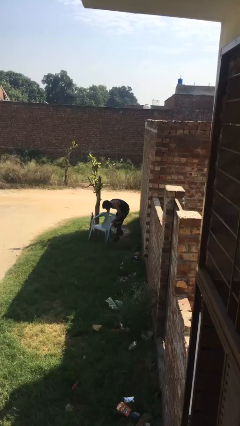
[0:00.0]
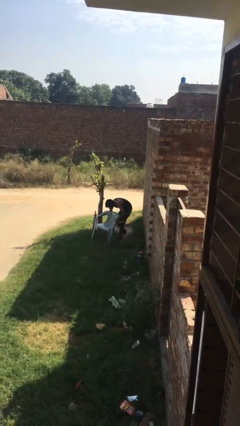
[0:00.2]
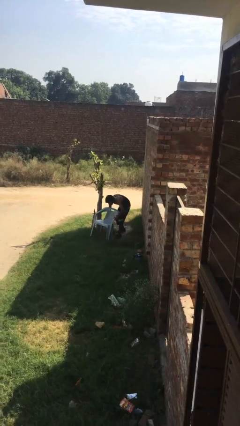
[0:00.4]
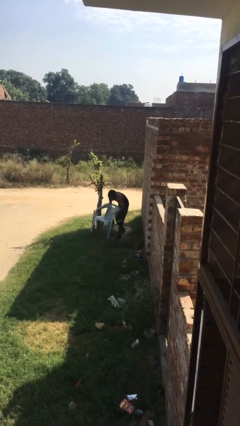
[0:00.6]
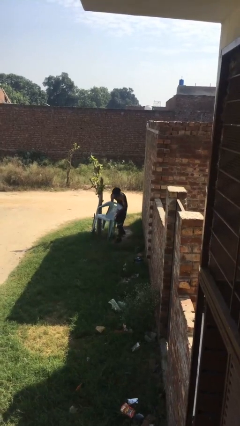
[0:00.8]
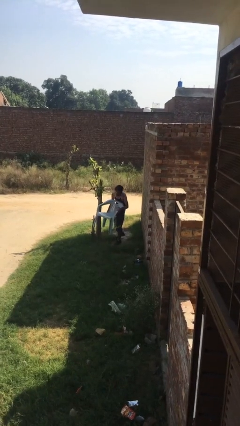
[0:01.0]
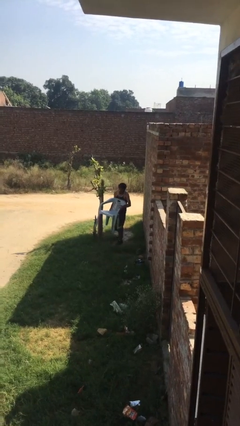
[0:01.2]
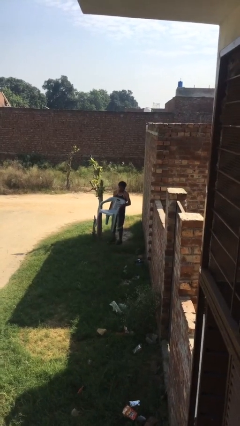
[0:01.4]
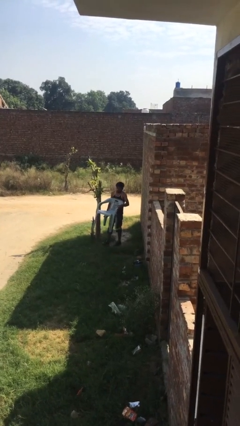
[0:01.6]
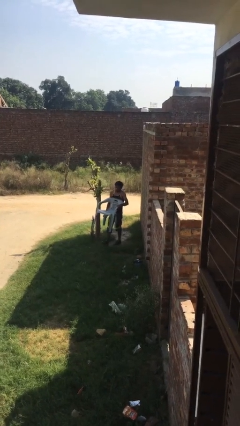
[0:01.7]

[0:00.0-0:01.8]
person picks up object from floor

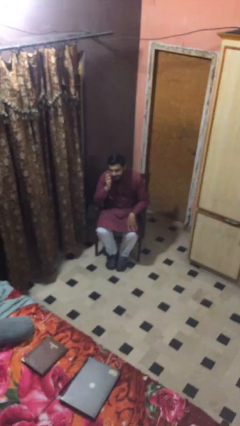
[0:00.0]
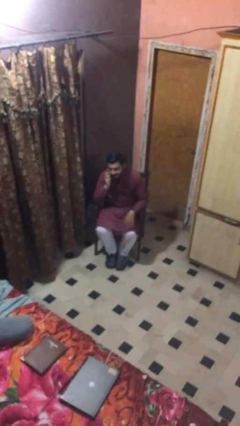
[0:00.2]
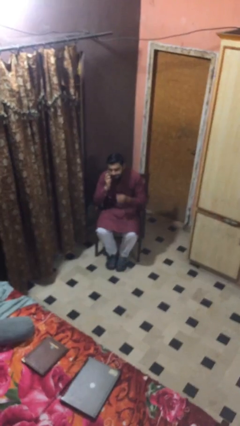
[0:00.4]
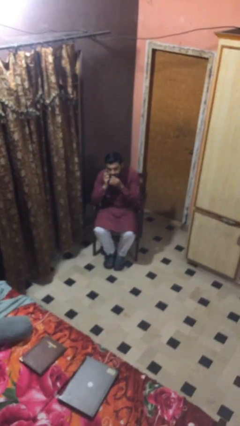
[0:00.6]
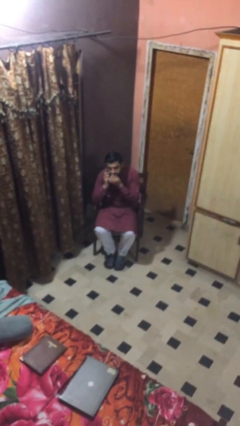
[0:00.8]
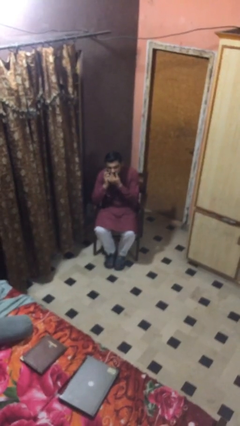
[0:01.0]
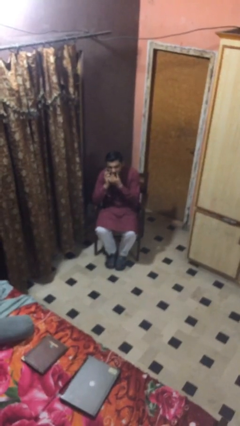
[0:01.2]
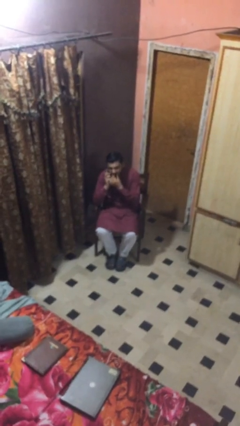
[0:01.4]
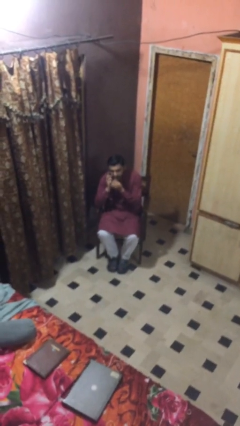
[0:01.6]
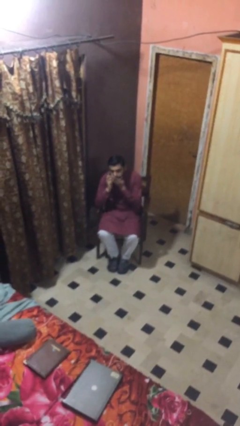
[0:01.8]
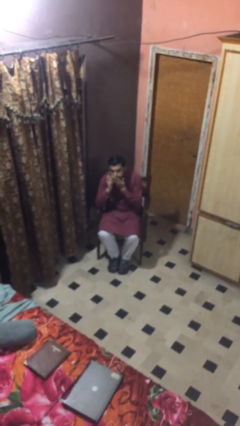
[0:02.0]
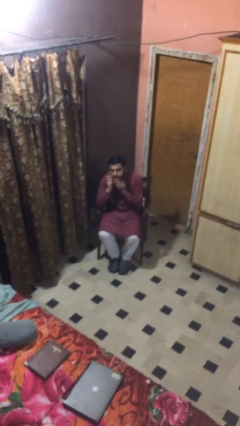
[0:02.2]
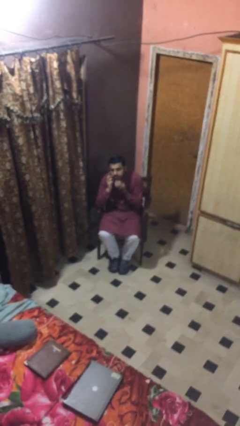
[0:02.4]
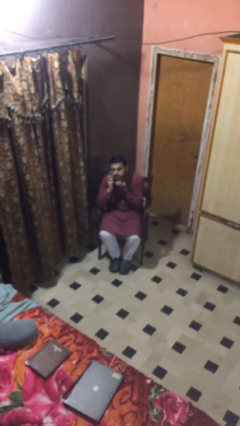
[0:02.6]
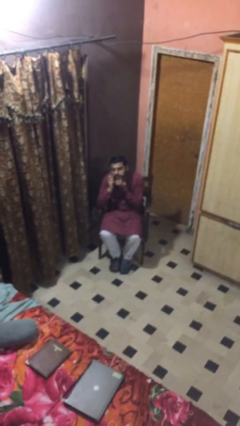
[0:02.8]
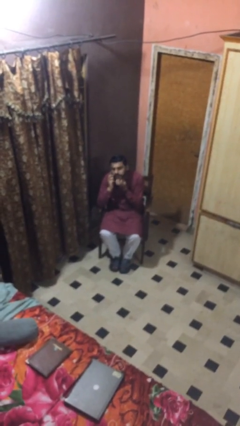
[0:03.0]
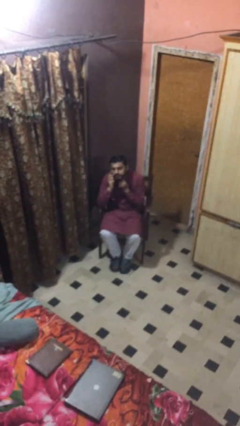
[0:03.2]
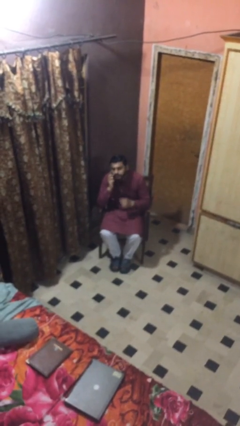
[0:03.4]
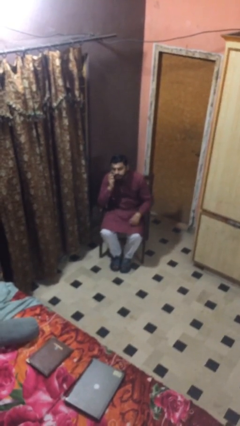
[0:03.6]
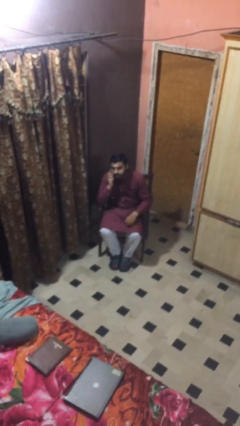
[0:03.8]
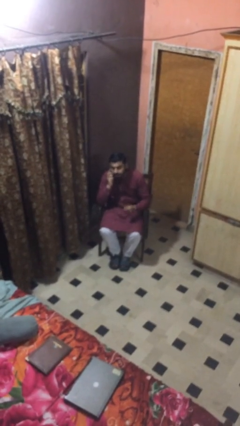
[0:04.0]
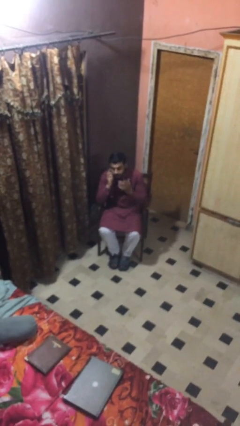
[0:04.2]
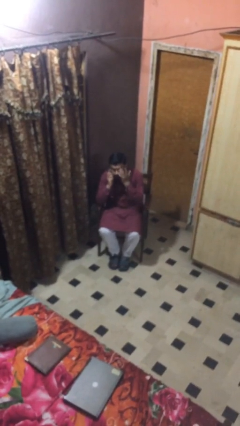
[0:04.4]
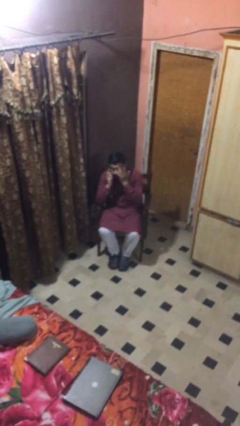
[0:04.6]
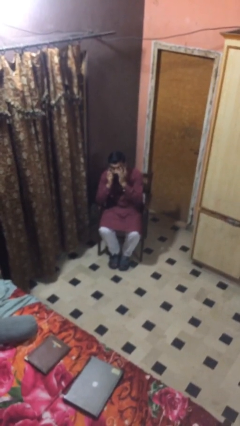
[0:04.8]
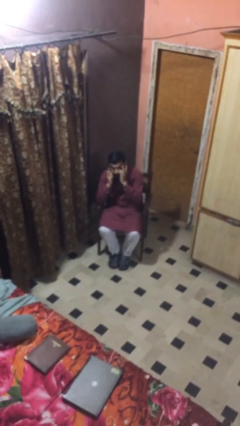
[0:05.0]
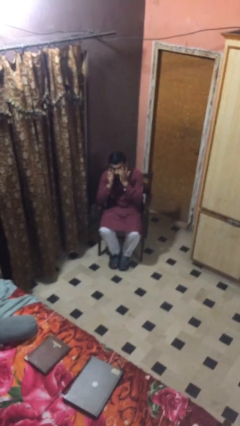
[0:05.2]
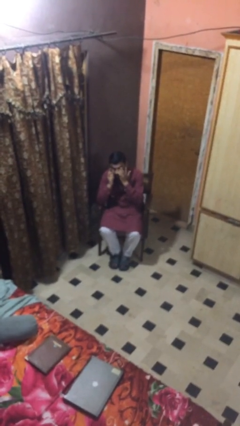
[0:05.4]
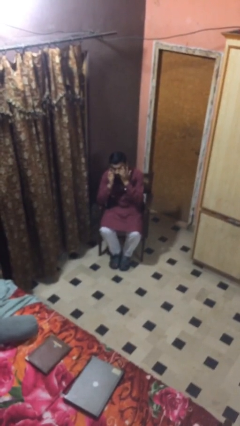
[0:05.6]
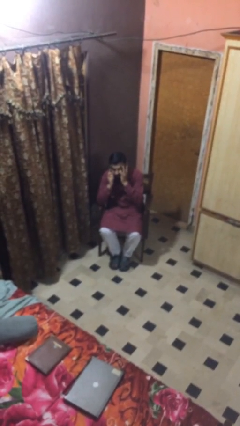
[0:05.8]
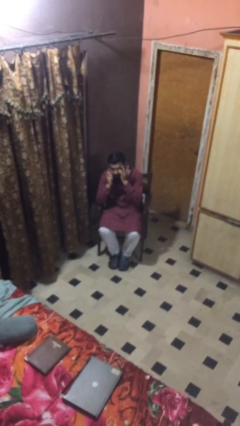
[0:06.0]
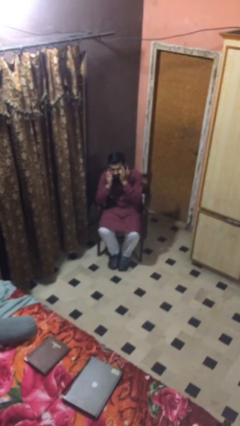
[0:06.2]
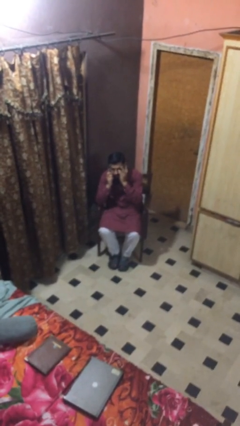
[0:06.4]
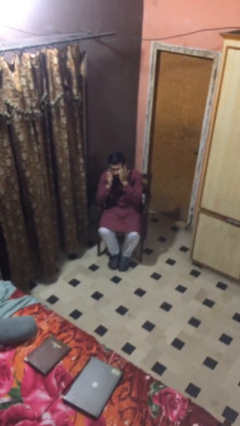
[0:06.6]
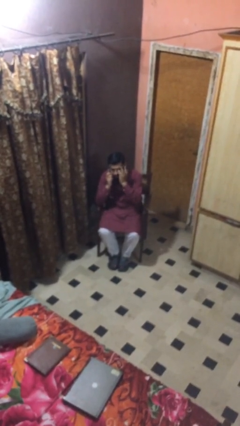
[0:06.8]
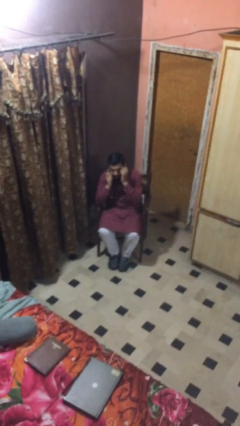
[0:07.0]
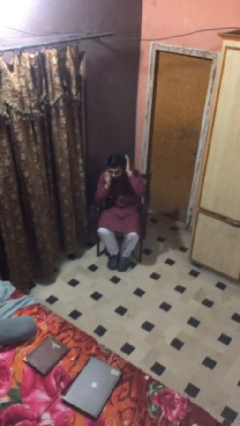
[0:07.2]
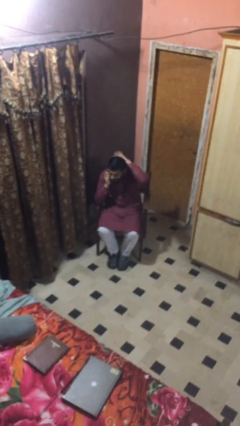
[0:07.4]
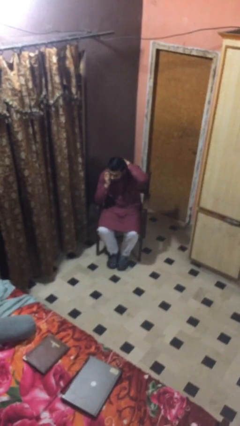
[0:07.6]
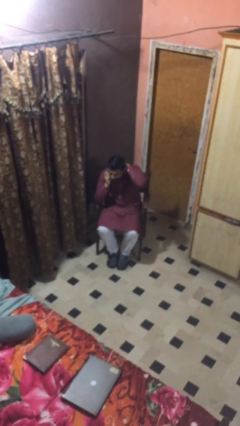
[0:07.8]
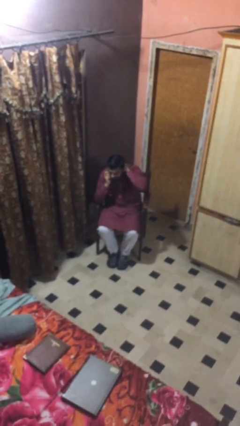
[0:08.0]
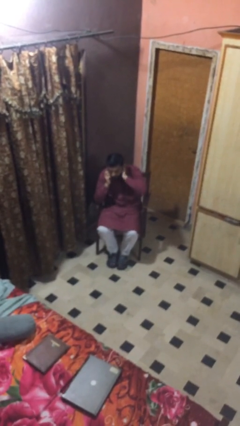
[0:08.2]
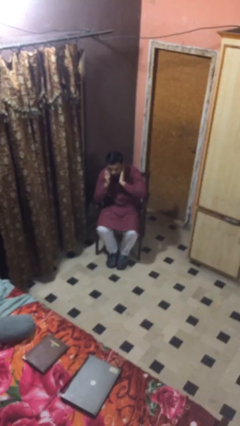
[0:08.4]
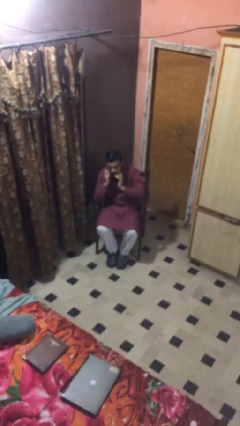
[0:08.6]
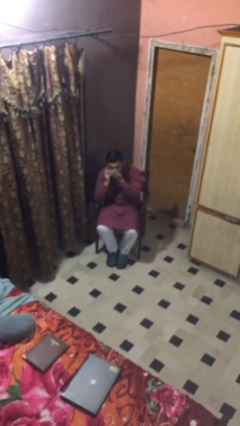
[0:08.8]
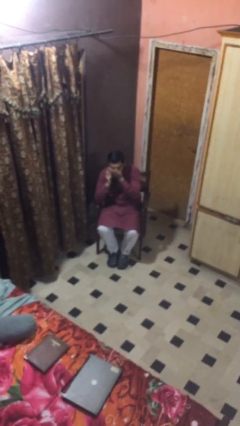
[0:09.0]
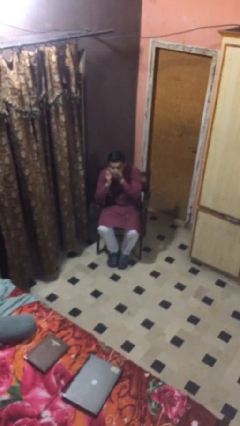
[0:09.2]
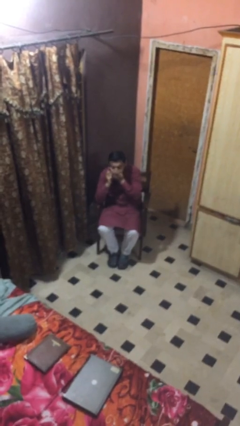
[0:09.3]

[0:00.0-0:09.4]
person talks on phone

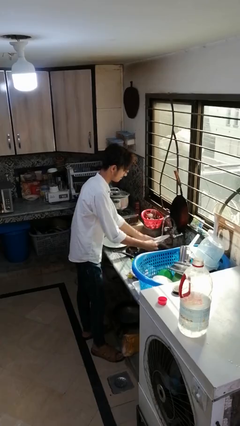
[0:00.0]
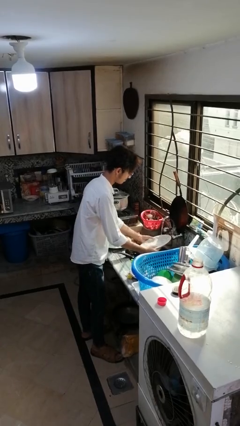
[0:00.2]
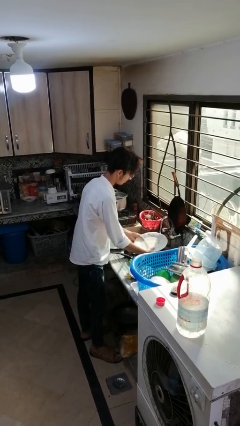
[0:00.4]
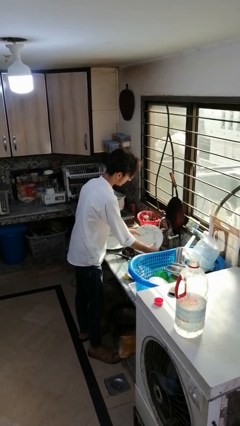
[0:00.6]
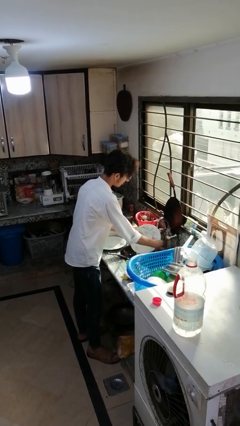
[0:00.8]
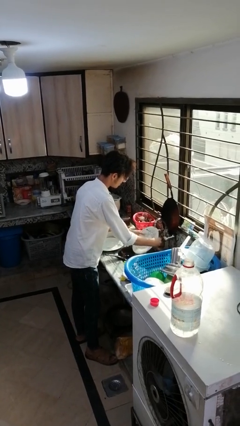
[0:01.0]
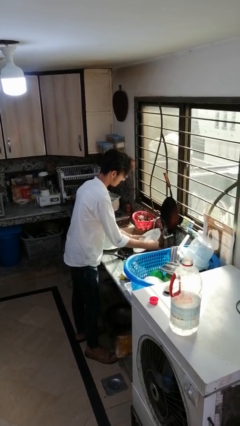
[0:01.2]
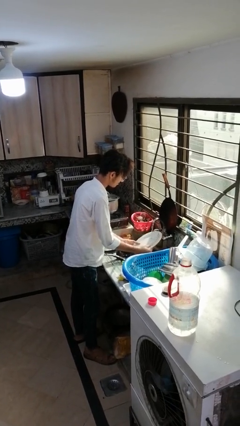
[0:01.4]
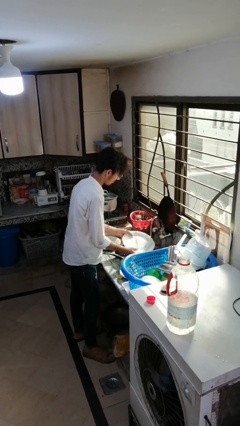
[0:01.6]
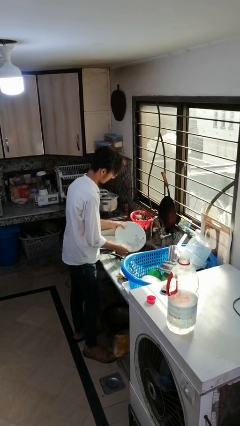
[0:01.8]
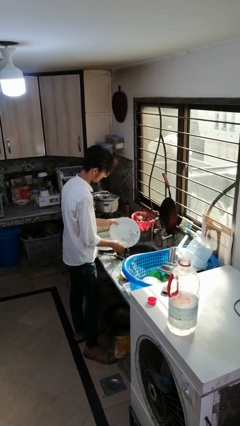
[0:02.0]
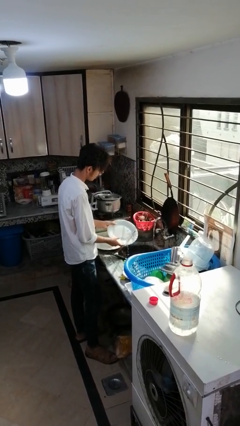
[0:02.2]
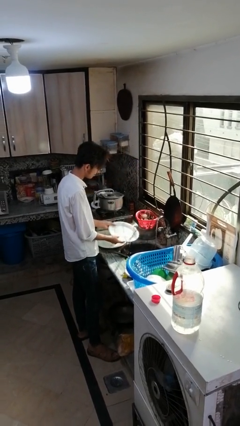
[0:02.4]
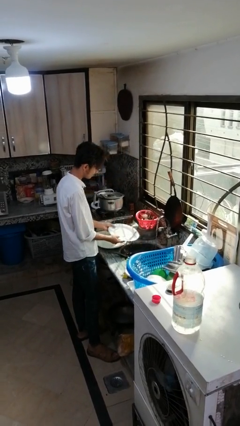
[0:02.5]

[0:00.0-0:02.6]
person washes dish

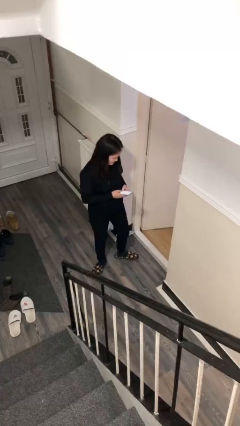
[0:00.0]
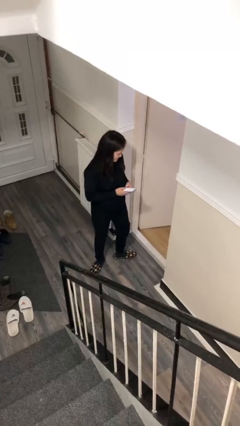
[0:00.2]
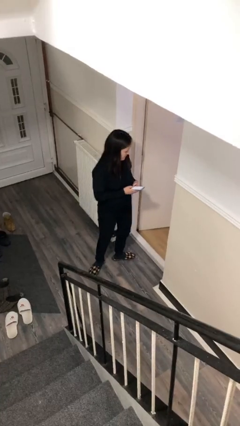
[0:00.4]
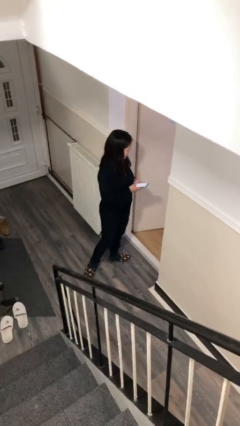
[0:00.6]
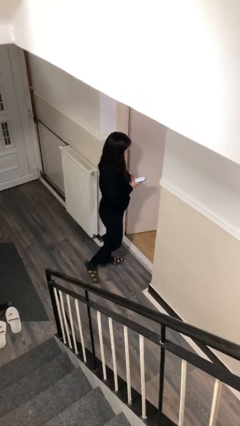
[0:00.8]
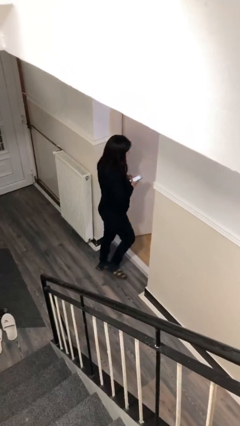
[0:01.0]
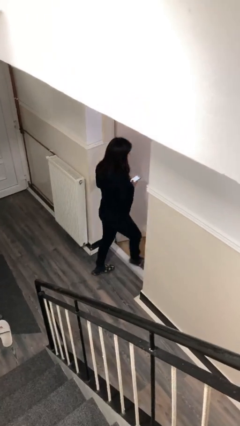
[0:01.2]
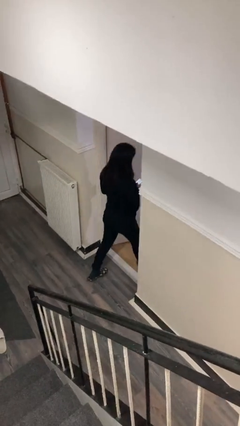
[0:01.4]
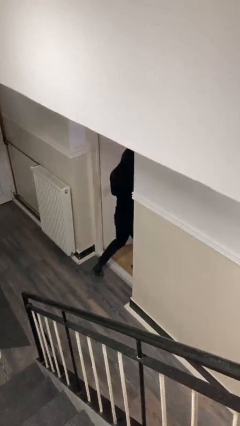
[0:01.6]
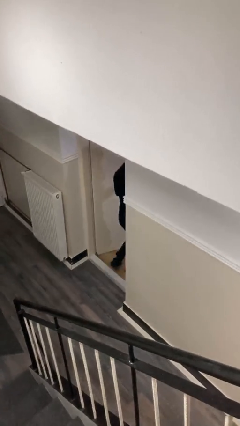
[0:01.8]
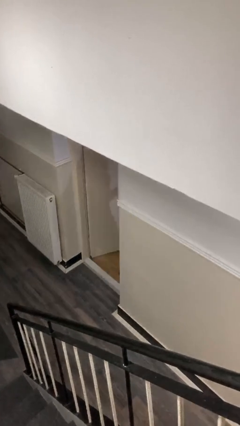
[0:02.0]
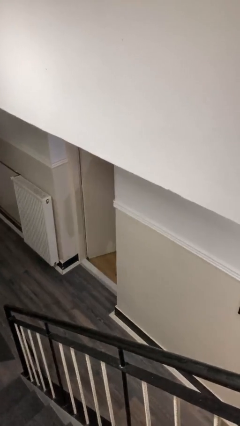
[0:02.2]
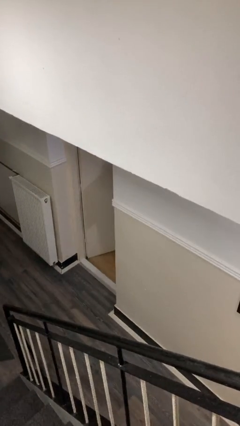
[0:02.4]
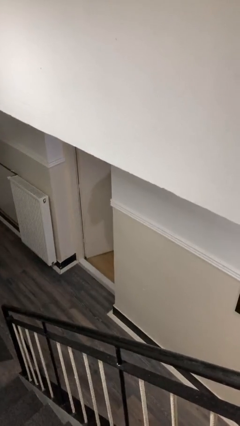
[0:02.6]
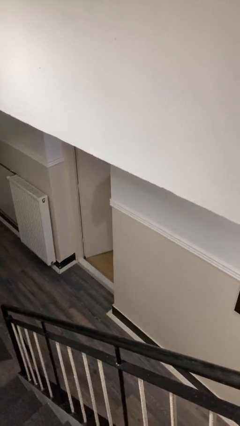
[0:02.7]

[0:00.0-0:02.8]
person exits scene through structure

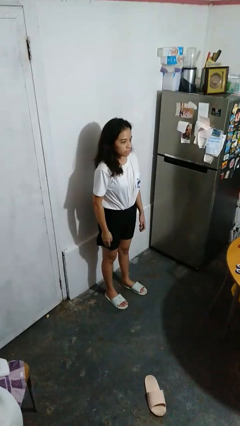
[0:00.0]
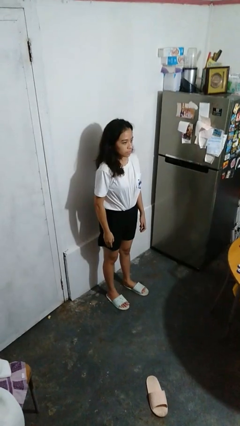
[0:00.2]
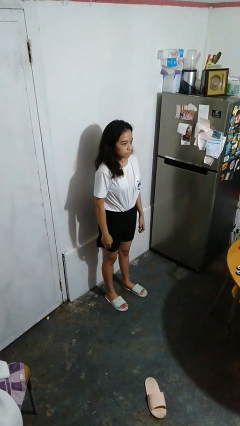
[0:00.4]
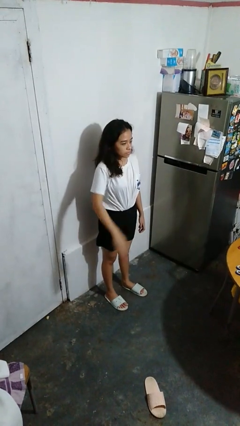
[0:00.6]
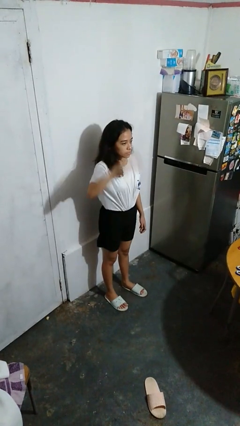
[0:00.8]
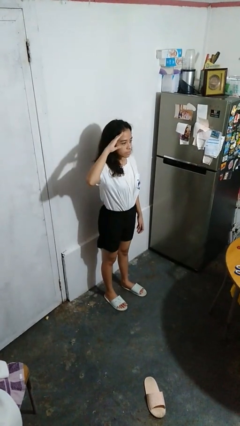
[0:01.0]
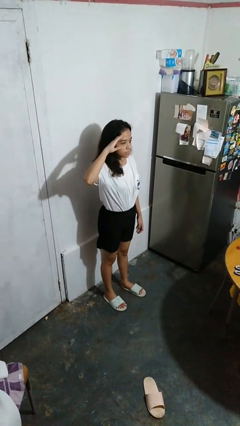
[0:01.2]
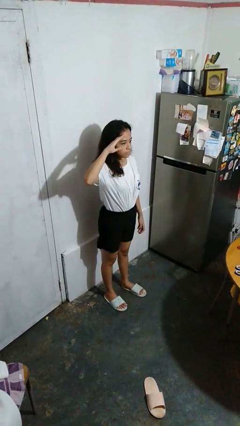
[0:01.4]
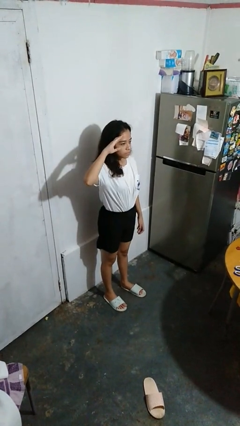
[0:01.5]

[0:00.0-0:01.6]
person salutes
